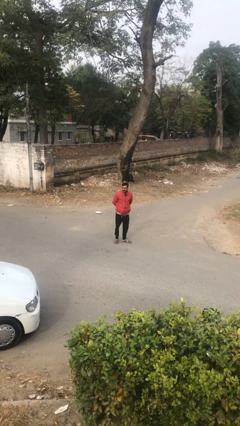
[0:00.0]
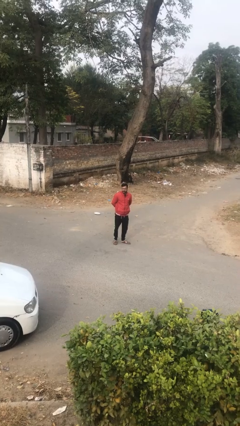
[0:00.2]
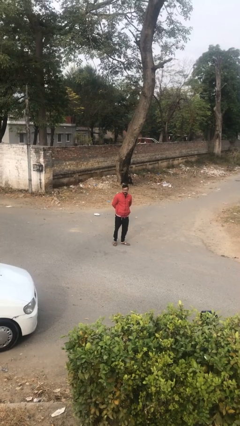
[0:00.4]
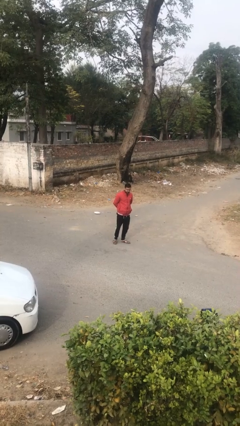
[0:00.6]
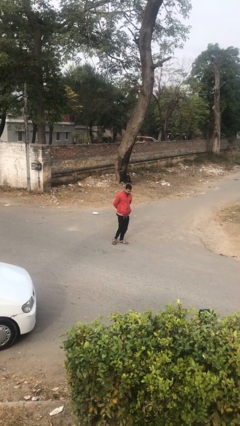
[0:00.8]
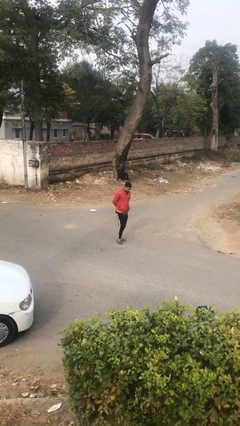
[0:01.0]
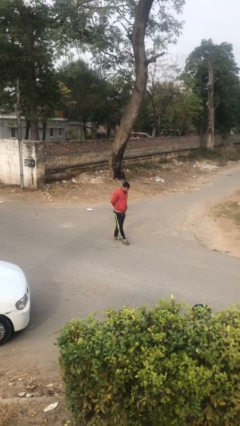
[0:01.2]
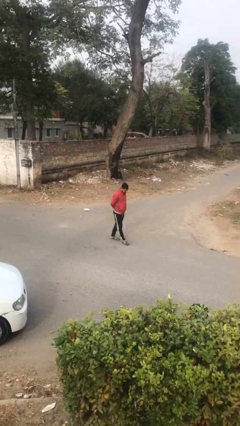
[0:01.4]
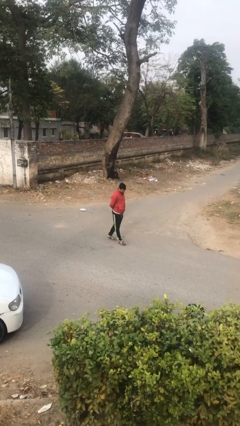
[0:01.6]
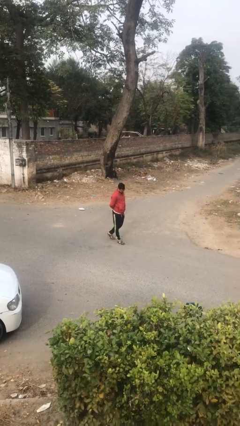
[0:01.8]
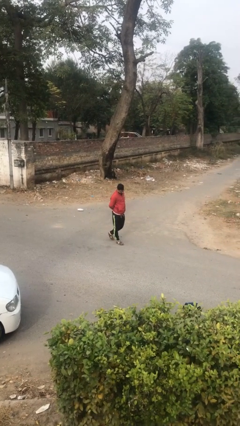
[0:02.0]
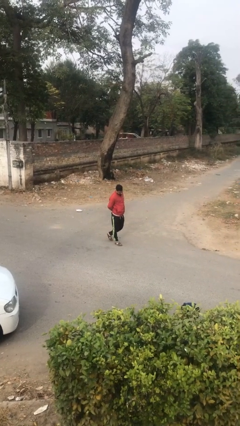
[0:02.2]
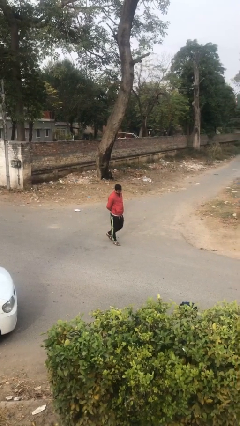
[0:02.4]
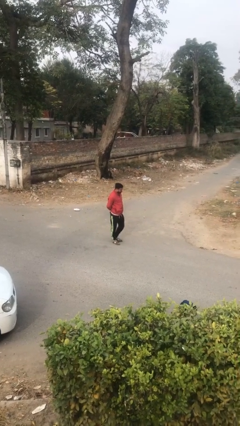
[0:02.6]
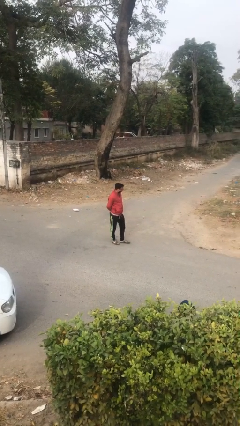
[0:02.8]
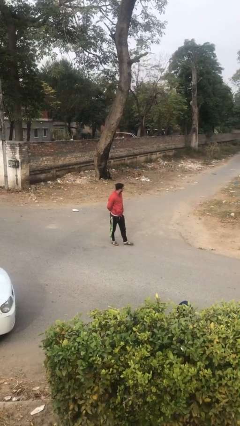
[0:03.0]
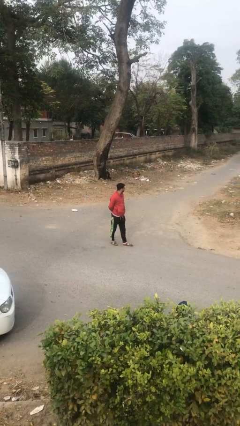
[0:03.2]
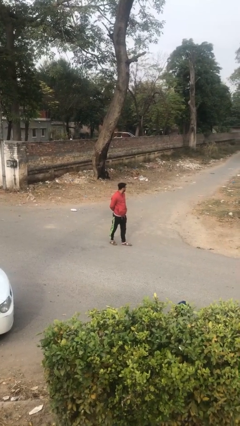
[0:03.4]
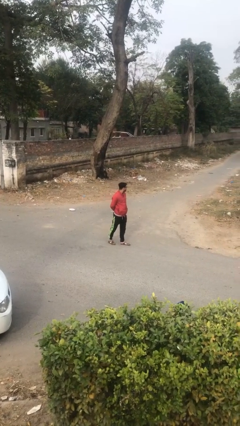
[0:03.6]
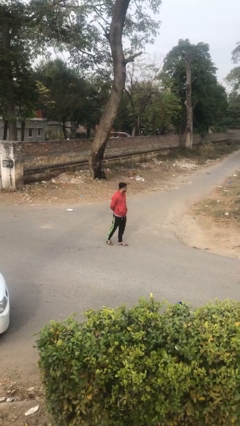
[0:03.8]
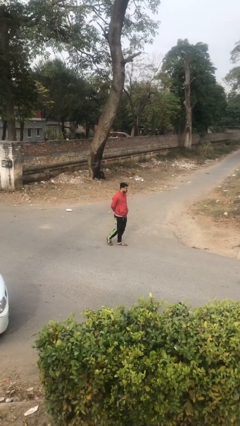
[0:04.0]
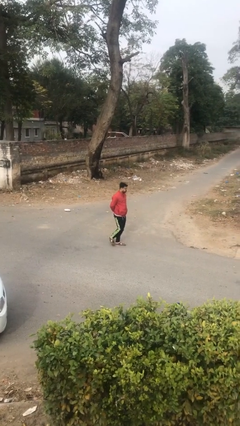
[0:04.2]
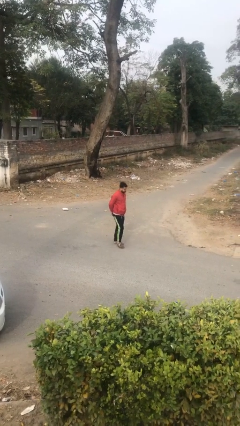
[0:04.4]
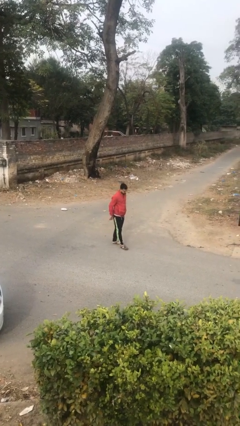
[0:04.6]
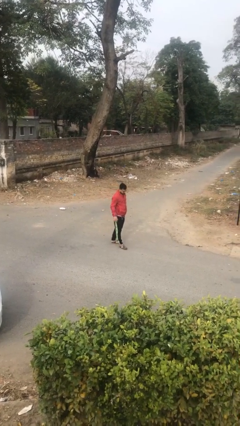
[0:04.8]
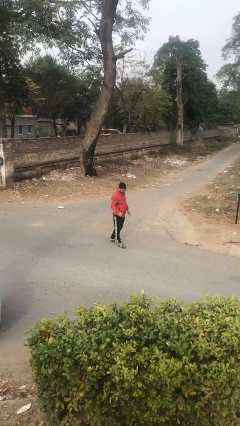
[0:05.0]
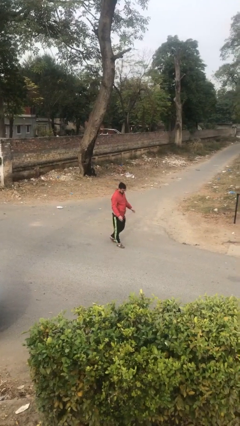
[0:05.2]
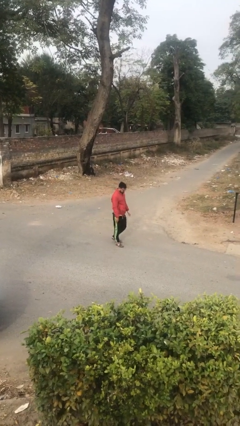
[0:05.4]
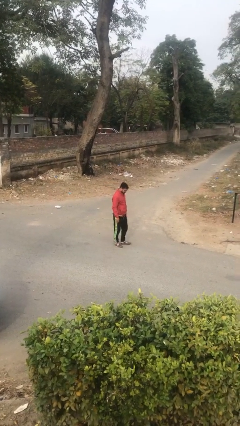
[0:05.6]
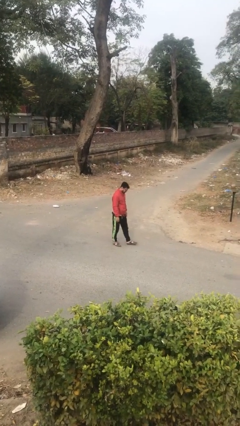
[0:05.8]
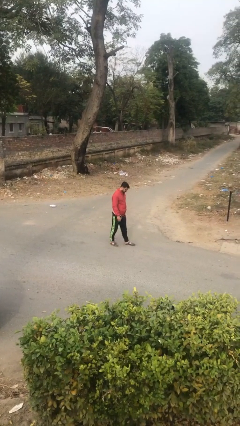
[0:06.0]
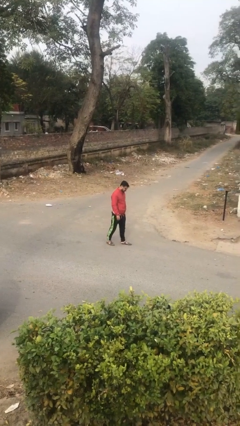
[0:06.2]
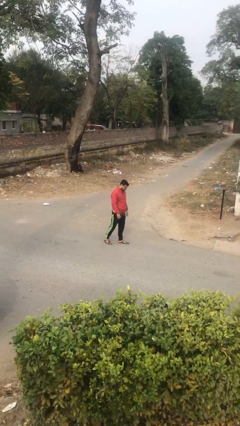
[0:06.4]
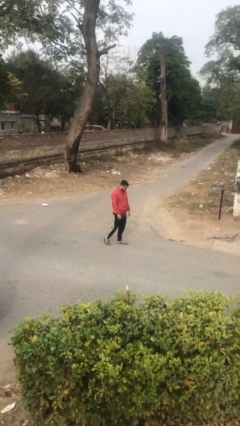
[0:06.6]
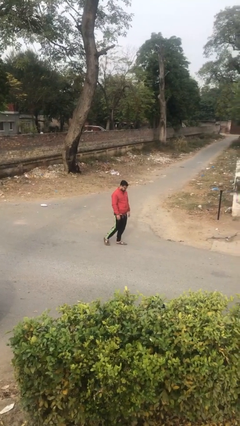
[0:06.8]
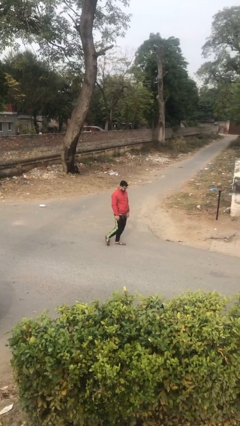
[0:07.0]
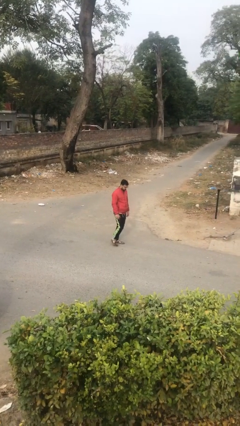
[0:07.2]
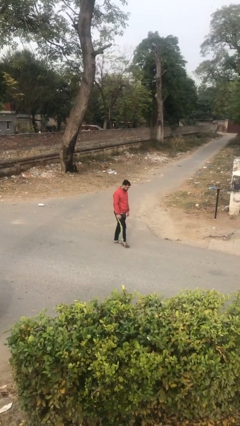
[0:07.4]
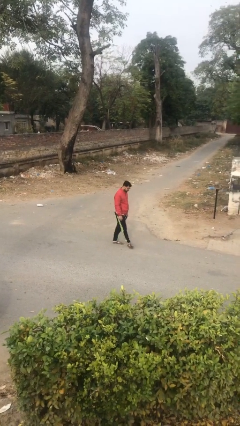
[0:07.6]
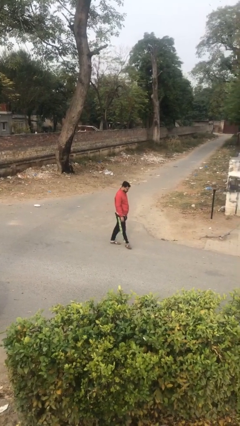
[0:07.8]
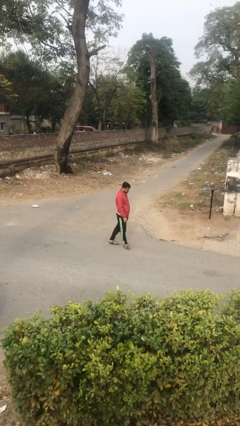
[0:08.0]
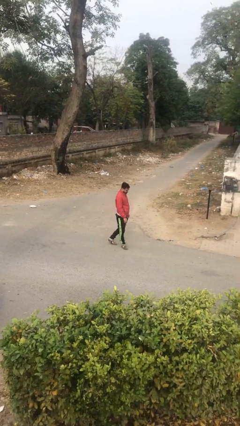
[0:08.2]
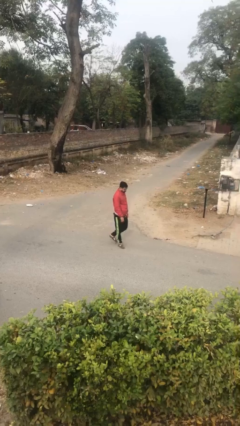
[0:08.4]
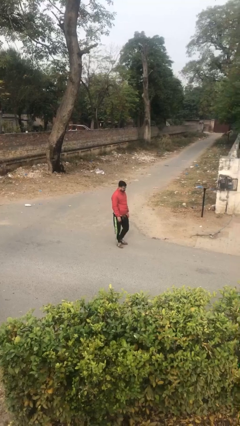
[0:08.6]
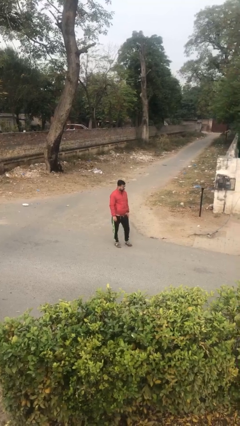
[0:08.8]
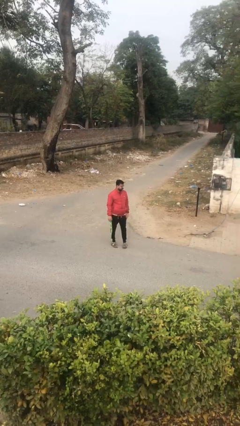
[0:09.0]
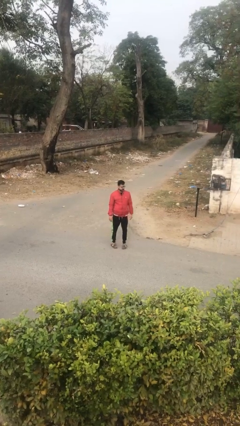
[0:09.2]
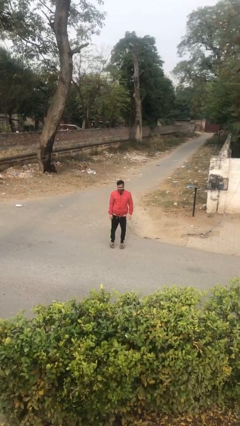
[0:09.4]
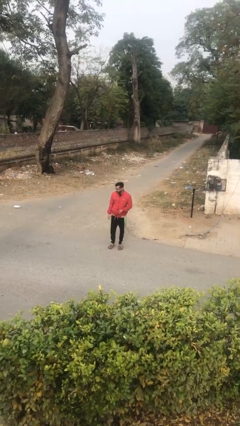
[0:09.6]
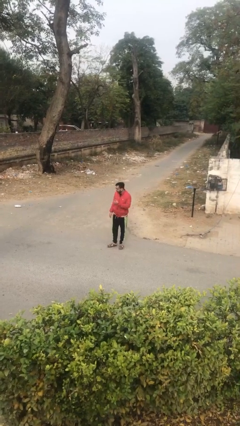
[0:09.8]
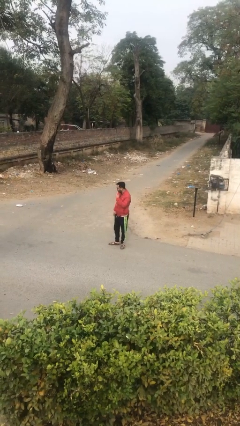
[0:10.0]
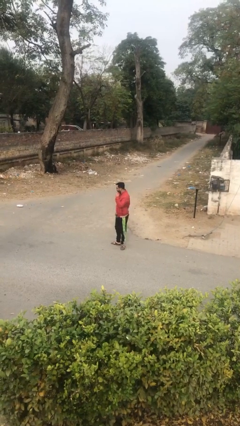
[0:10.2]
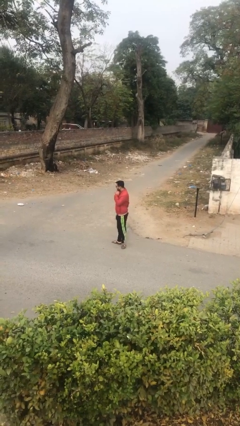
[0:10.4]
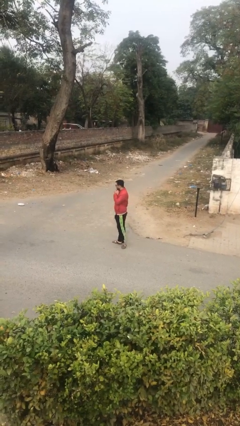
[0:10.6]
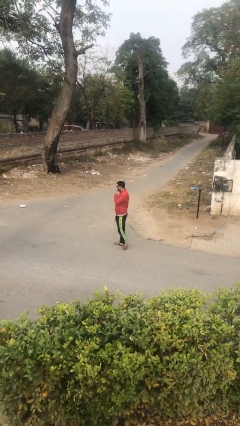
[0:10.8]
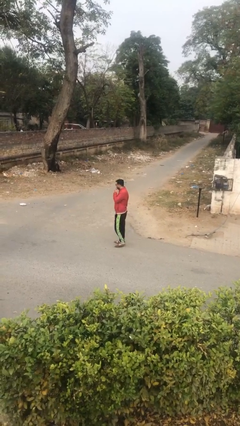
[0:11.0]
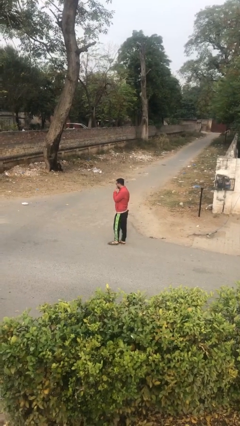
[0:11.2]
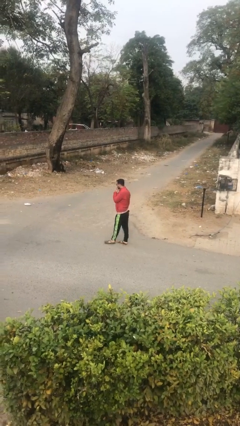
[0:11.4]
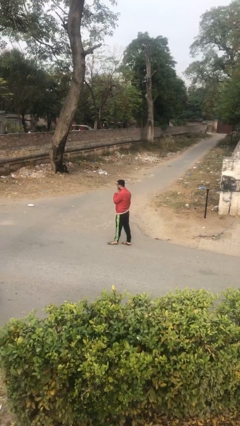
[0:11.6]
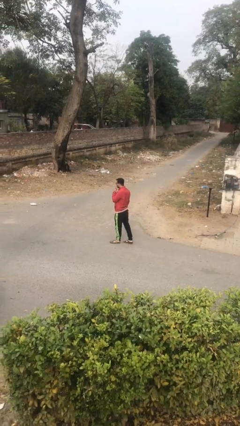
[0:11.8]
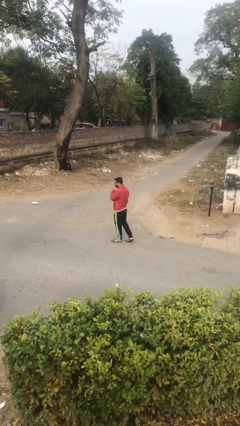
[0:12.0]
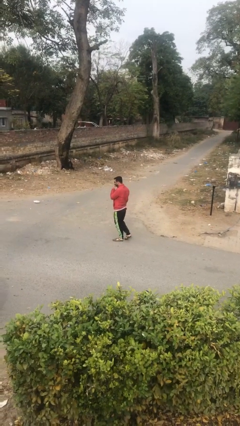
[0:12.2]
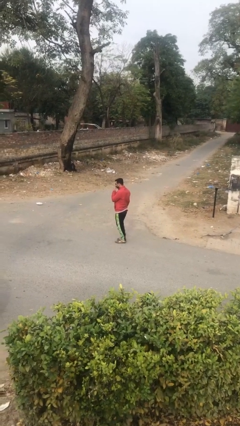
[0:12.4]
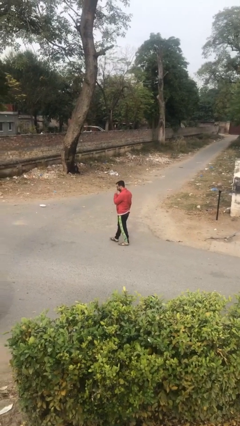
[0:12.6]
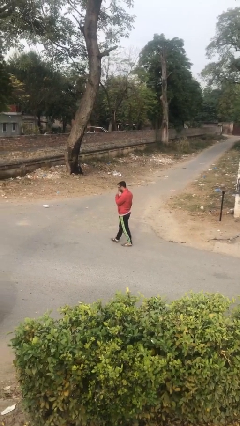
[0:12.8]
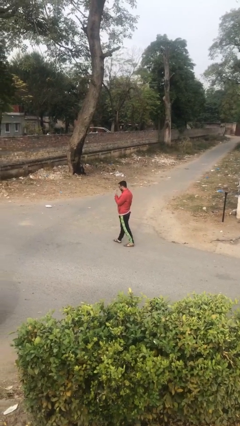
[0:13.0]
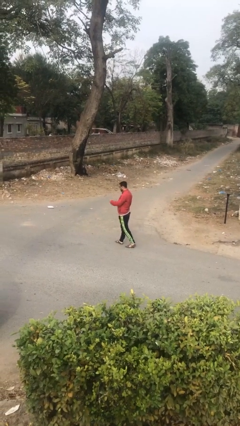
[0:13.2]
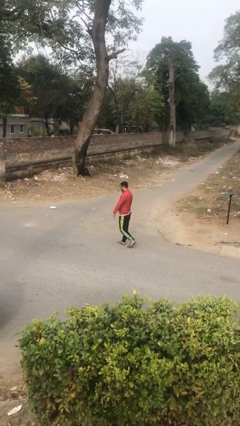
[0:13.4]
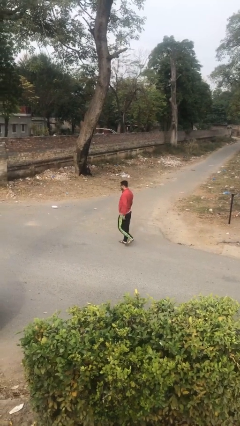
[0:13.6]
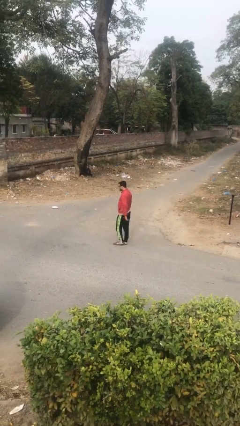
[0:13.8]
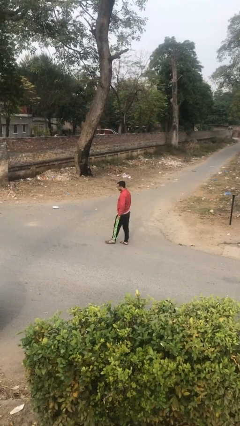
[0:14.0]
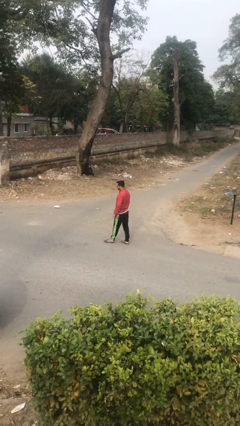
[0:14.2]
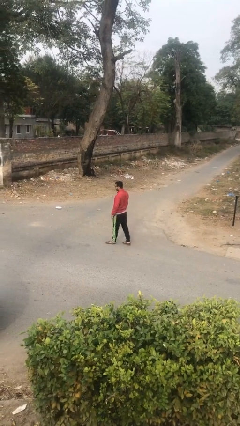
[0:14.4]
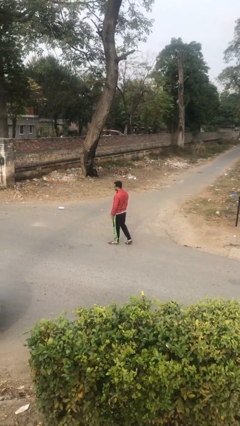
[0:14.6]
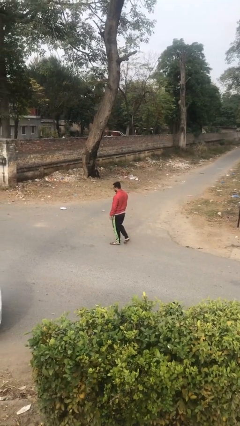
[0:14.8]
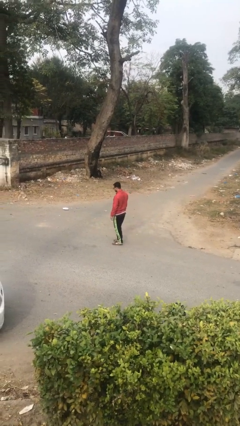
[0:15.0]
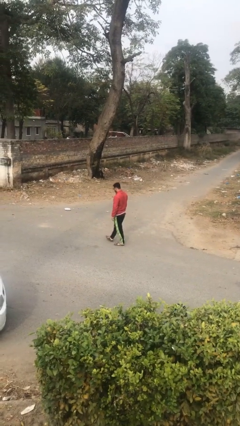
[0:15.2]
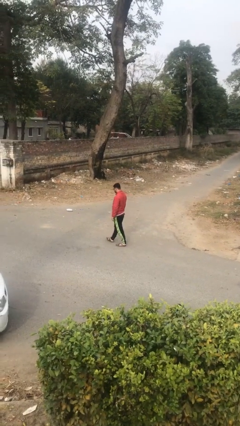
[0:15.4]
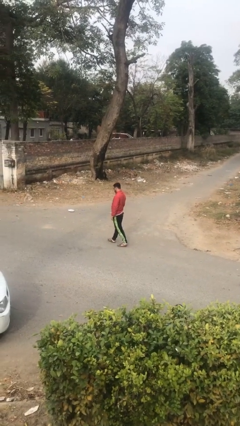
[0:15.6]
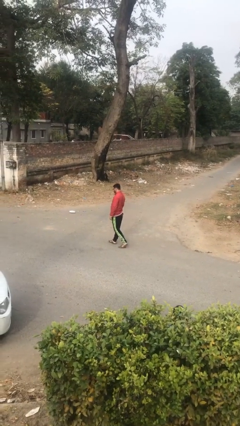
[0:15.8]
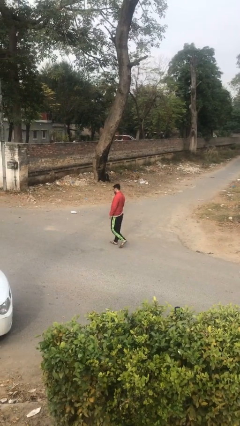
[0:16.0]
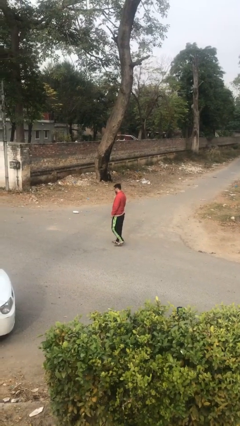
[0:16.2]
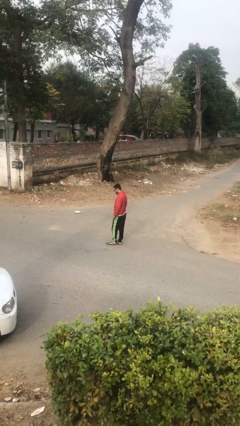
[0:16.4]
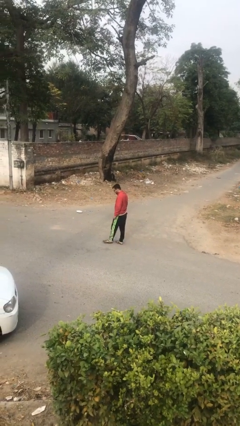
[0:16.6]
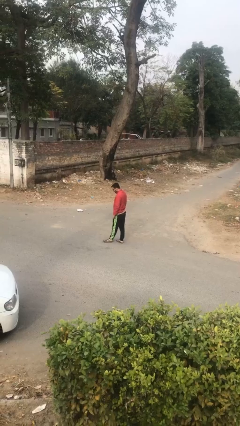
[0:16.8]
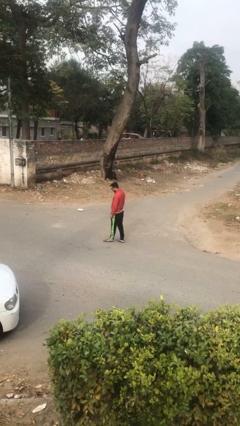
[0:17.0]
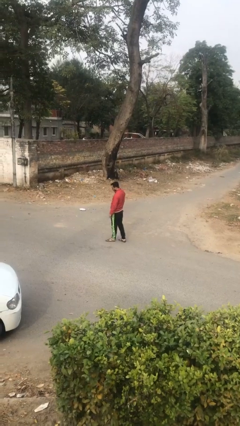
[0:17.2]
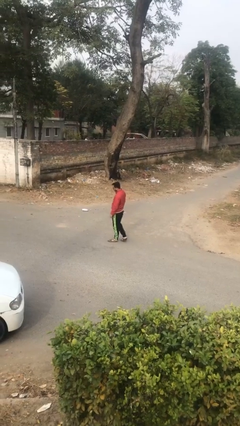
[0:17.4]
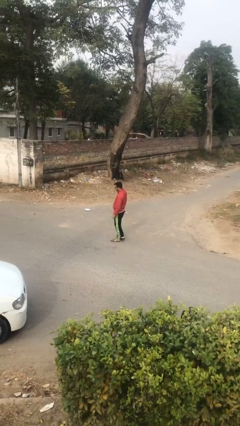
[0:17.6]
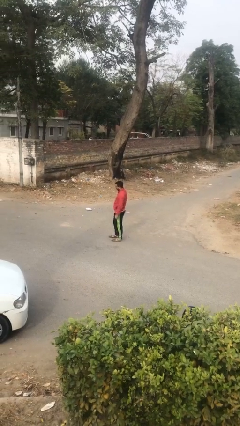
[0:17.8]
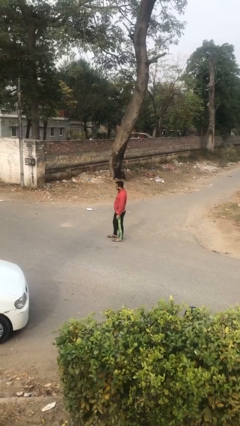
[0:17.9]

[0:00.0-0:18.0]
person walks

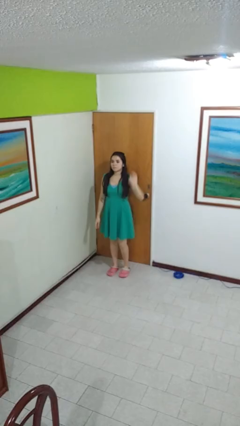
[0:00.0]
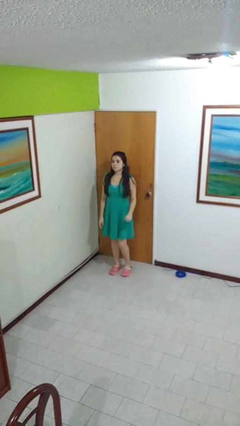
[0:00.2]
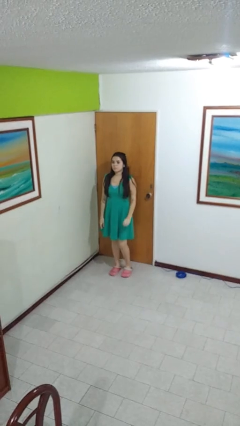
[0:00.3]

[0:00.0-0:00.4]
person gestures lower hand
